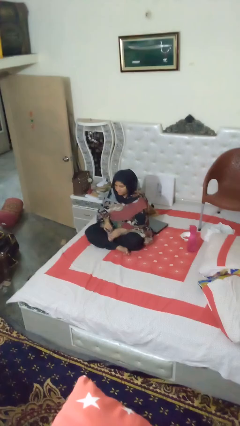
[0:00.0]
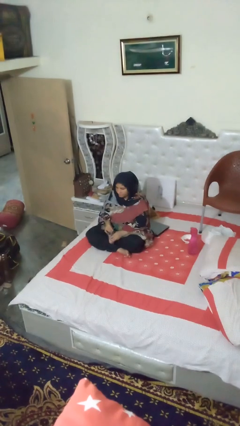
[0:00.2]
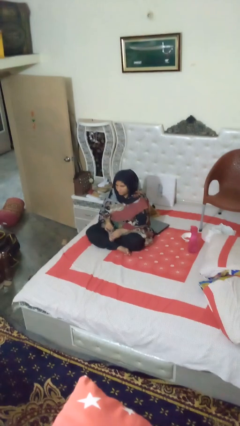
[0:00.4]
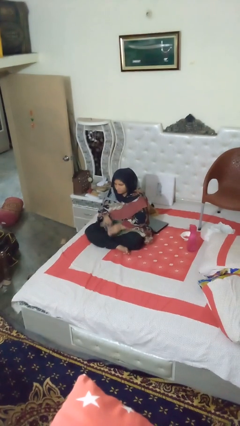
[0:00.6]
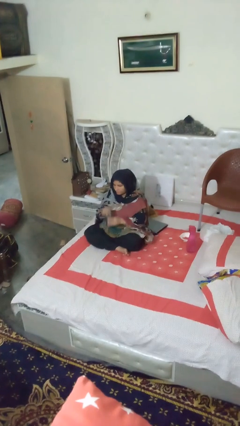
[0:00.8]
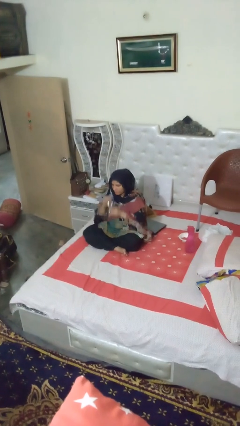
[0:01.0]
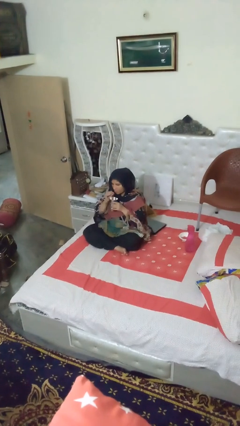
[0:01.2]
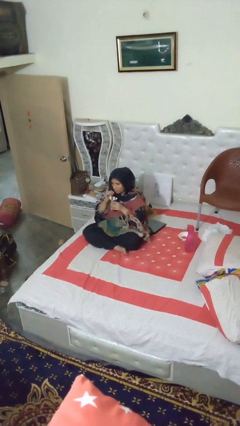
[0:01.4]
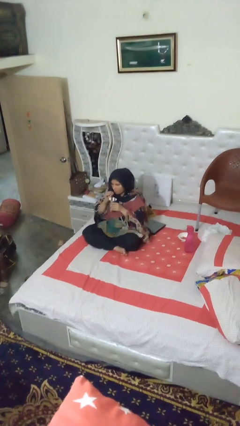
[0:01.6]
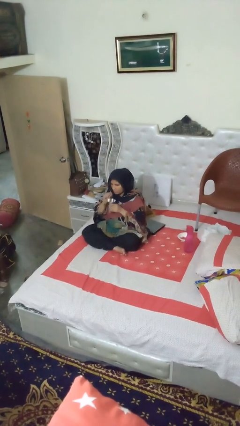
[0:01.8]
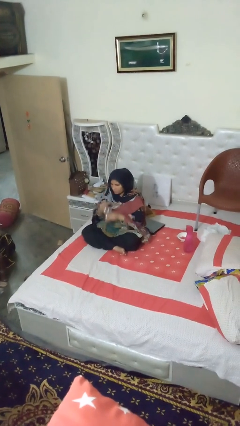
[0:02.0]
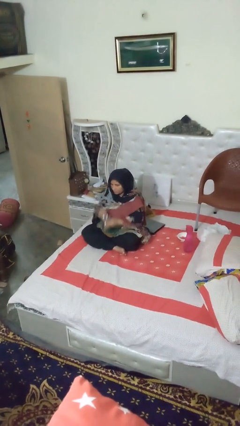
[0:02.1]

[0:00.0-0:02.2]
person drinks from straw

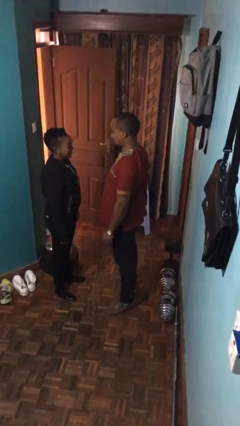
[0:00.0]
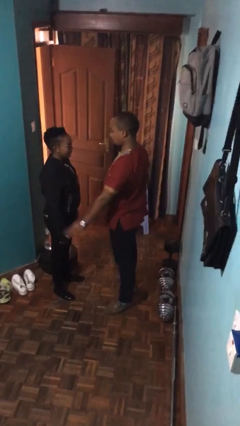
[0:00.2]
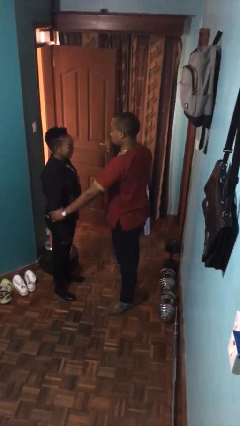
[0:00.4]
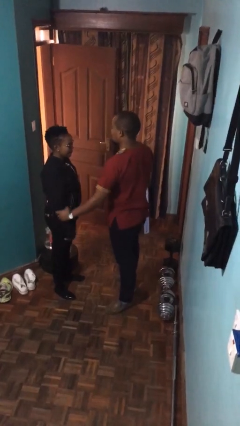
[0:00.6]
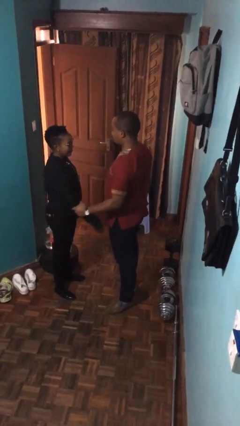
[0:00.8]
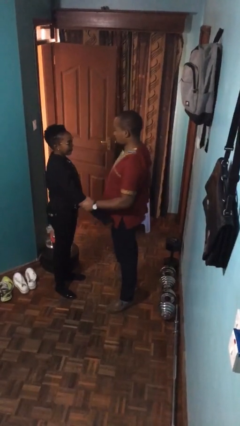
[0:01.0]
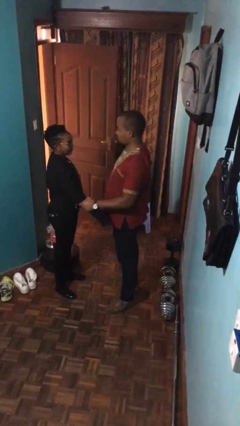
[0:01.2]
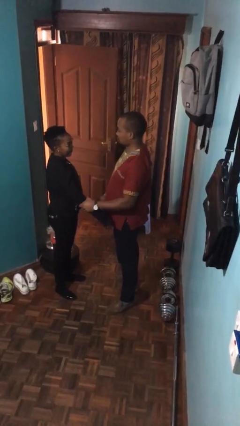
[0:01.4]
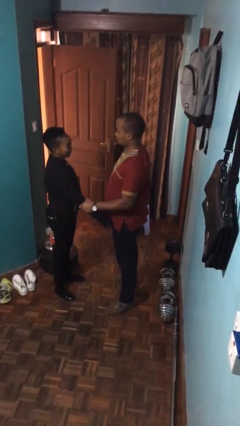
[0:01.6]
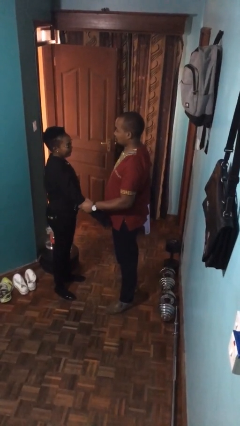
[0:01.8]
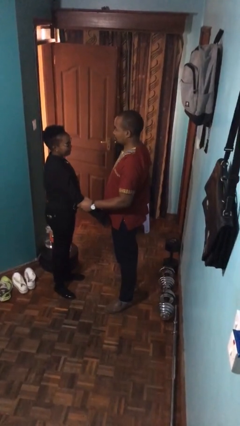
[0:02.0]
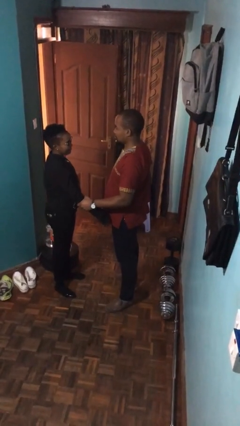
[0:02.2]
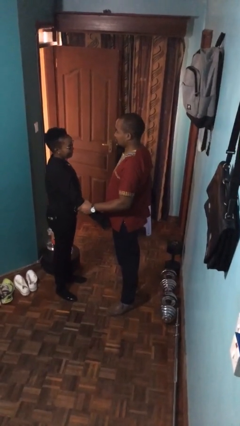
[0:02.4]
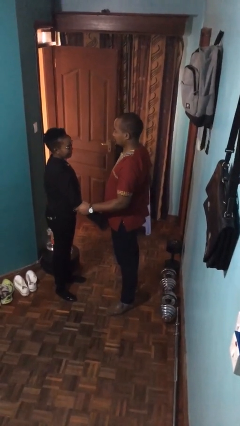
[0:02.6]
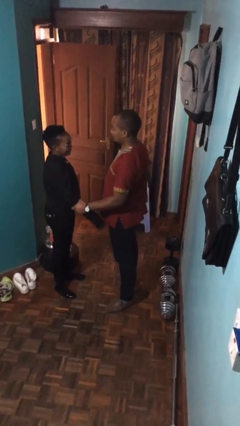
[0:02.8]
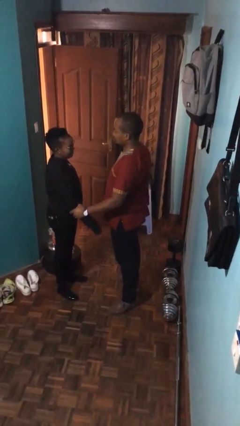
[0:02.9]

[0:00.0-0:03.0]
person grabs person by forearm

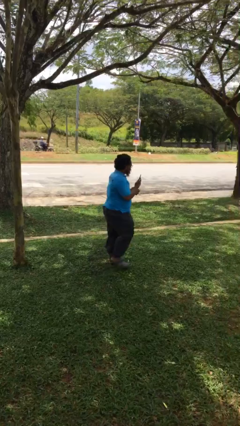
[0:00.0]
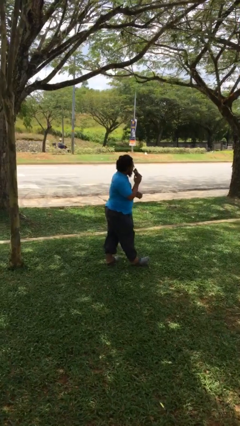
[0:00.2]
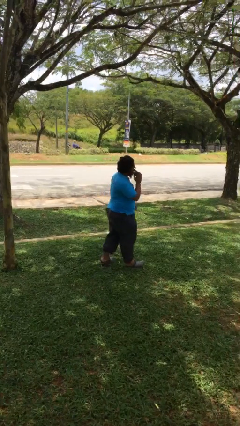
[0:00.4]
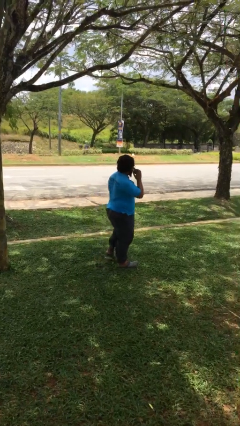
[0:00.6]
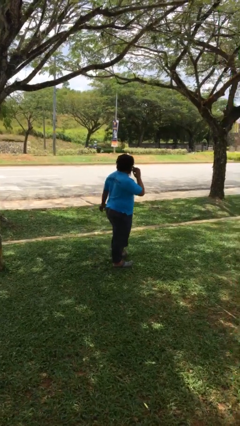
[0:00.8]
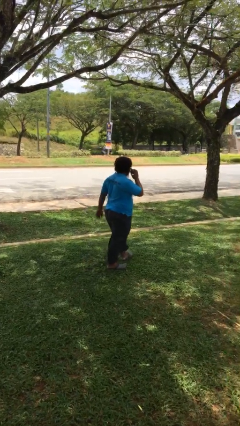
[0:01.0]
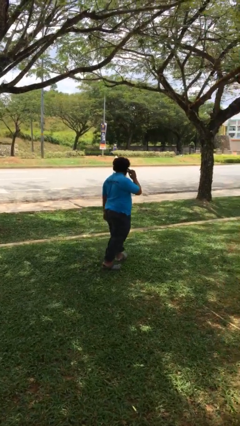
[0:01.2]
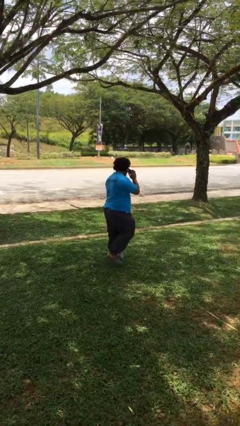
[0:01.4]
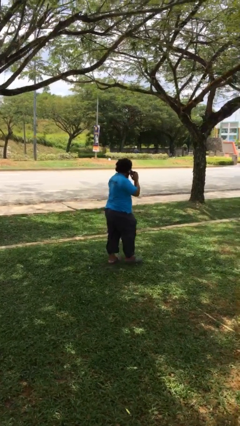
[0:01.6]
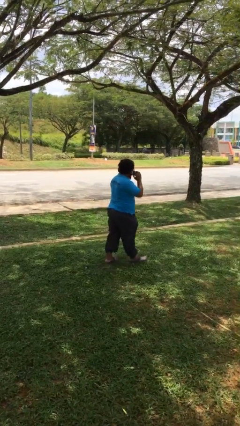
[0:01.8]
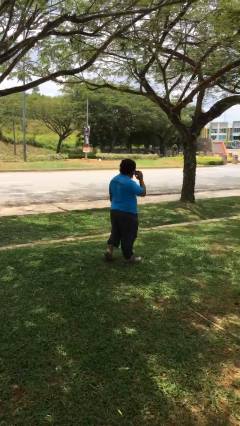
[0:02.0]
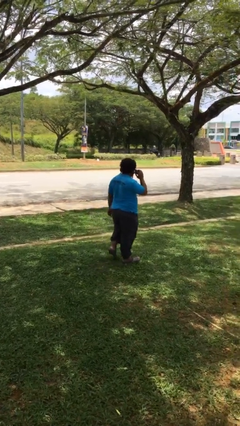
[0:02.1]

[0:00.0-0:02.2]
person talks on phone

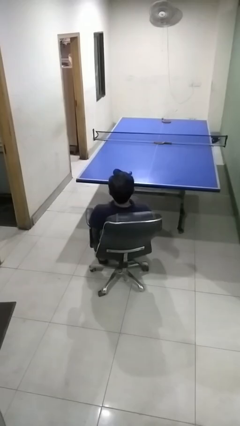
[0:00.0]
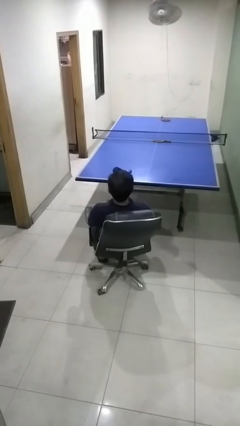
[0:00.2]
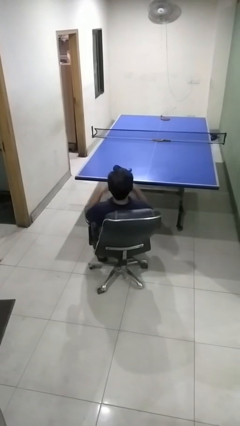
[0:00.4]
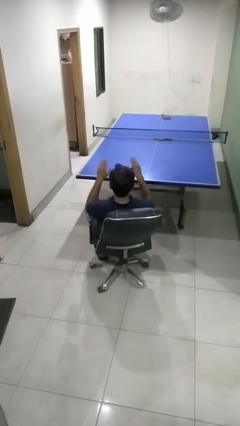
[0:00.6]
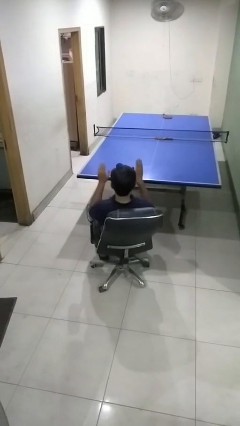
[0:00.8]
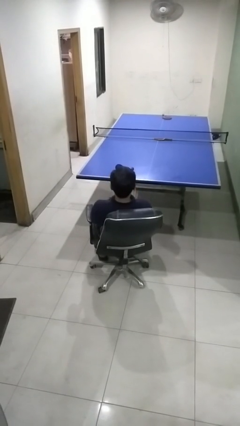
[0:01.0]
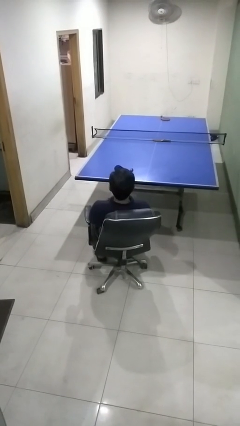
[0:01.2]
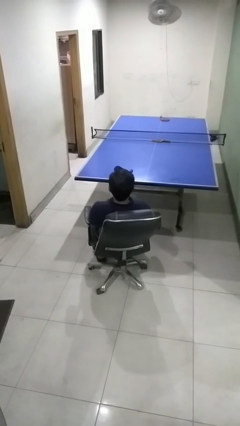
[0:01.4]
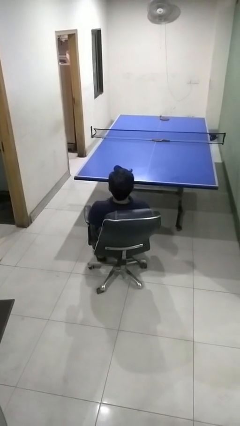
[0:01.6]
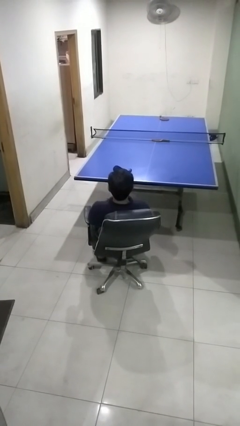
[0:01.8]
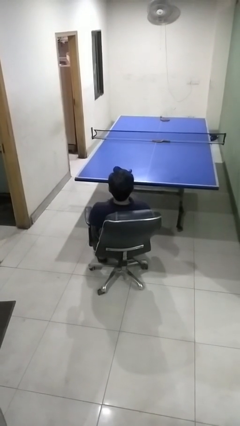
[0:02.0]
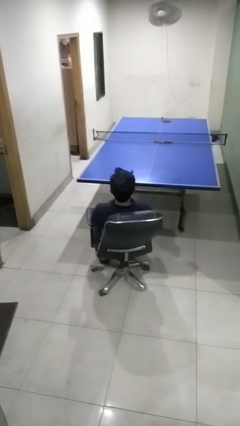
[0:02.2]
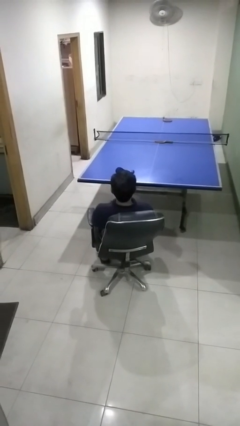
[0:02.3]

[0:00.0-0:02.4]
person slaps hands on thighs

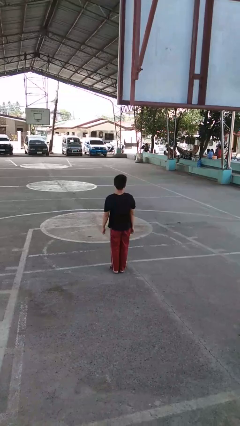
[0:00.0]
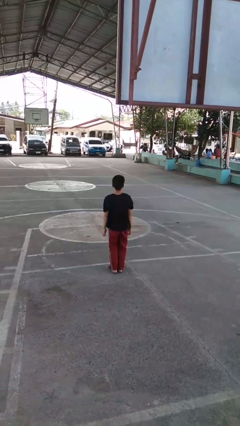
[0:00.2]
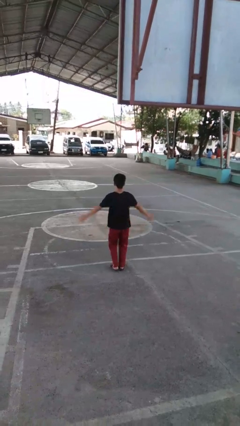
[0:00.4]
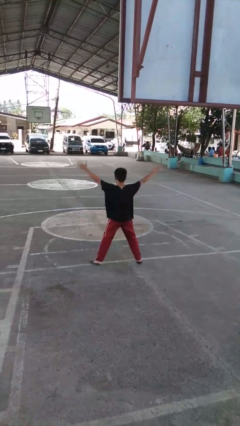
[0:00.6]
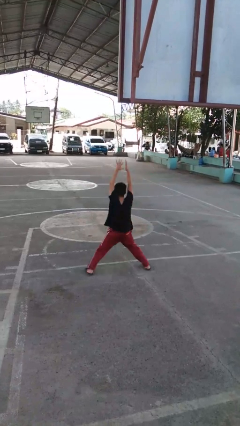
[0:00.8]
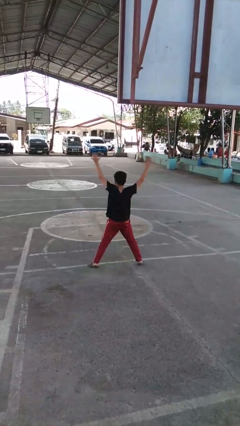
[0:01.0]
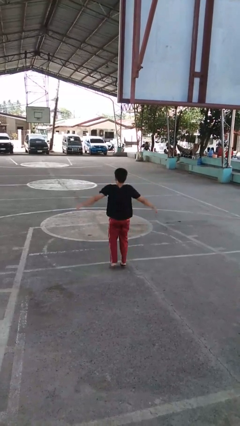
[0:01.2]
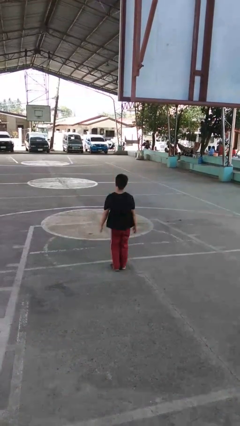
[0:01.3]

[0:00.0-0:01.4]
person exercises with jumping jacks

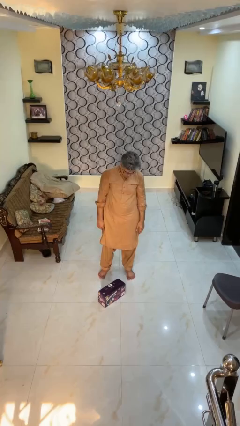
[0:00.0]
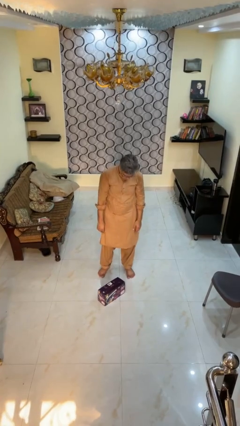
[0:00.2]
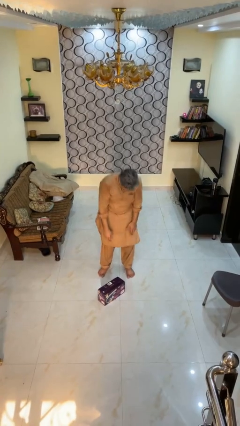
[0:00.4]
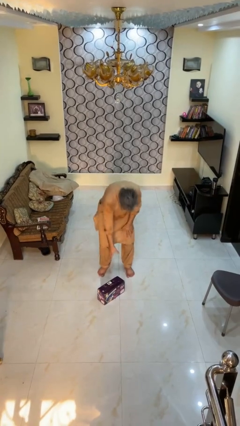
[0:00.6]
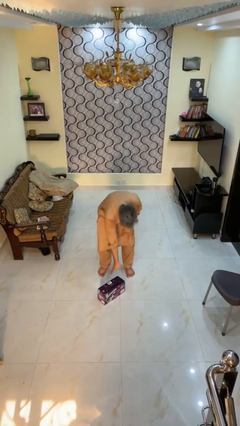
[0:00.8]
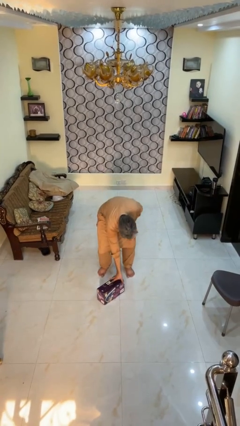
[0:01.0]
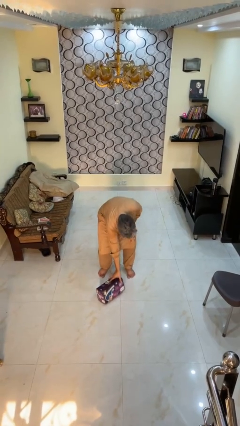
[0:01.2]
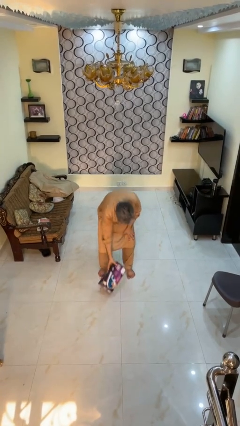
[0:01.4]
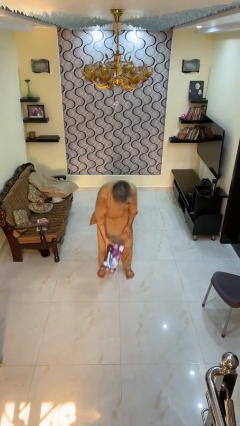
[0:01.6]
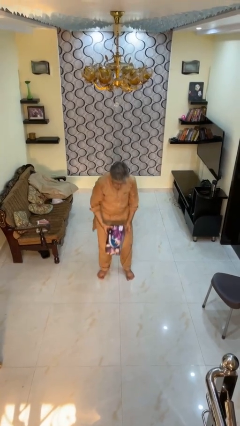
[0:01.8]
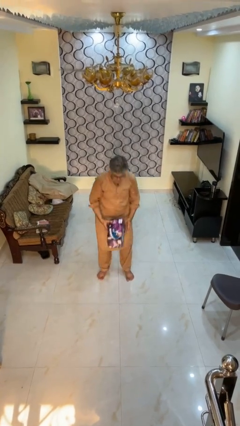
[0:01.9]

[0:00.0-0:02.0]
person picks up object from floor

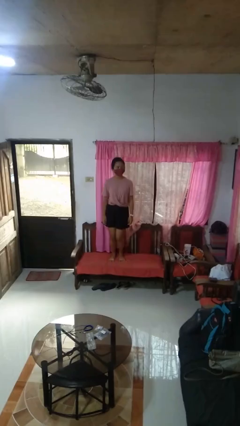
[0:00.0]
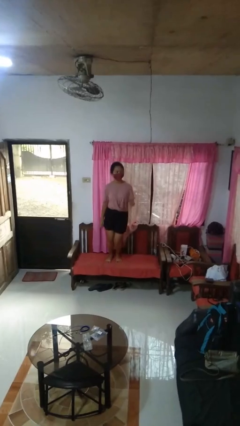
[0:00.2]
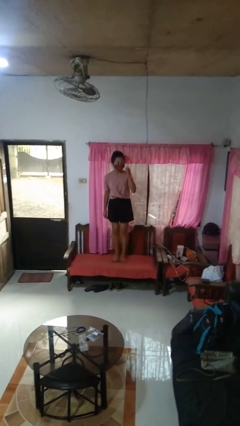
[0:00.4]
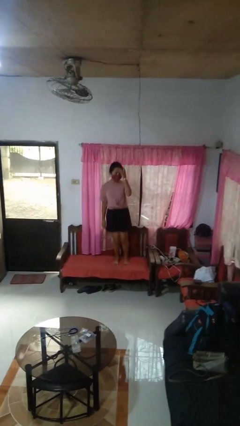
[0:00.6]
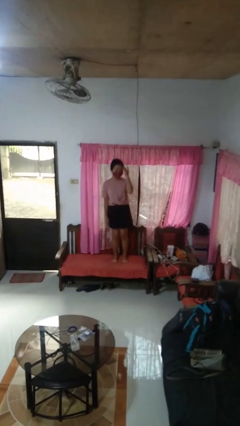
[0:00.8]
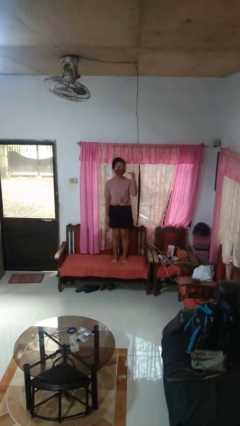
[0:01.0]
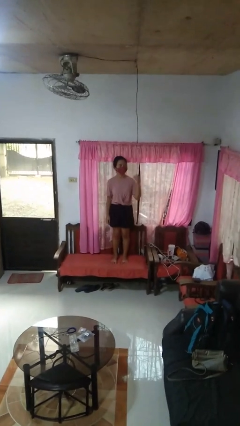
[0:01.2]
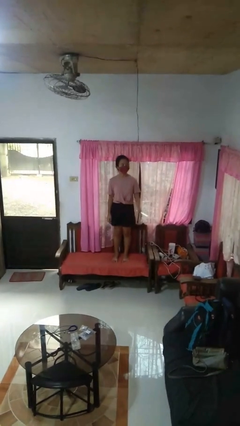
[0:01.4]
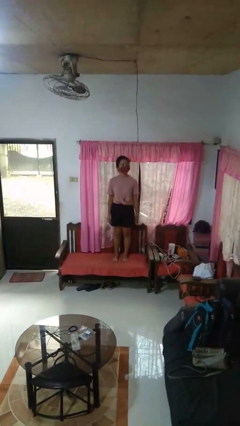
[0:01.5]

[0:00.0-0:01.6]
person jumps on couch

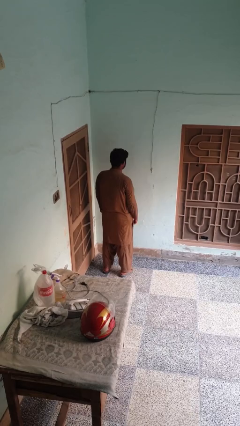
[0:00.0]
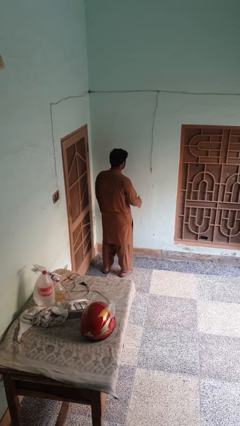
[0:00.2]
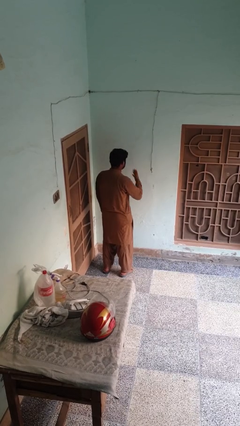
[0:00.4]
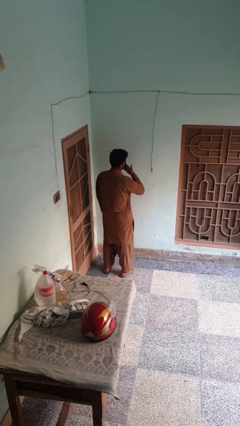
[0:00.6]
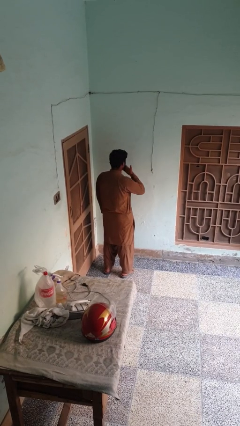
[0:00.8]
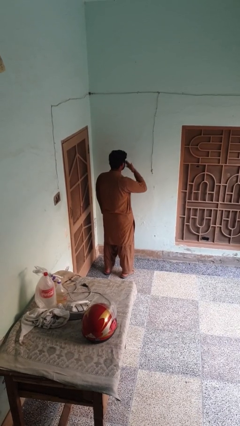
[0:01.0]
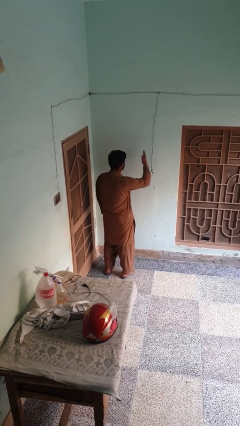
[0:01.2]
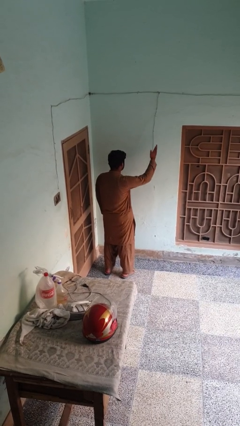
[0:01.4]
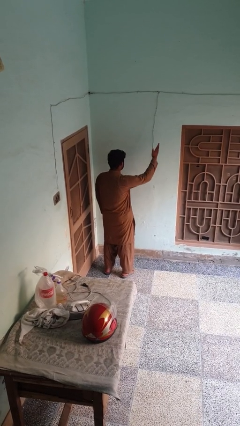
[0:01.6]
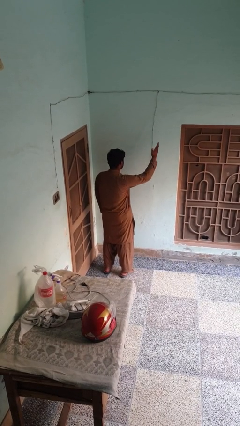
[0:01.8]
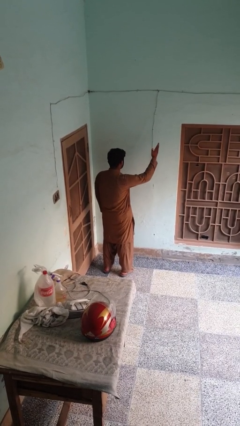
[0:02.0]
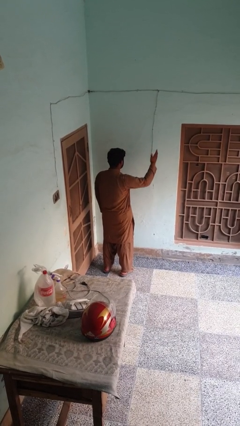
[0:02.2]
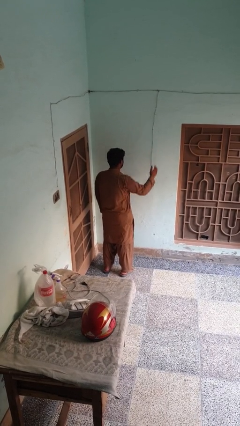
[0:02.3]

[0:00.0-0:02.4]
person gestures blow kiss
